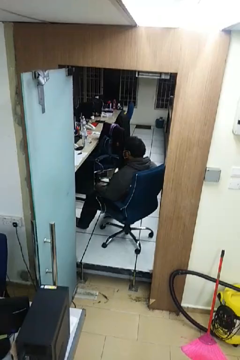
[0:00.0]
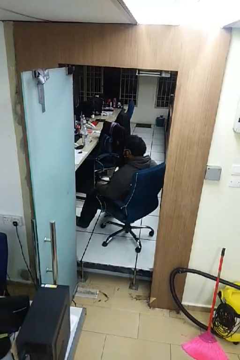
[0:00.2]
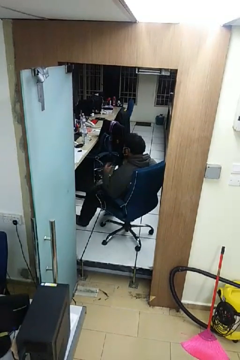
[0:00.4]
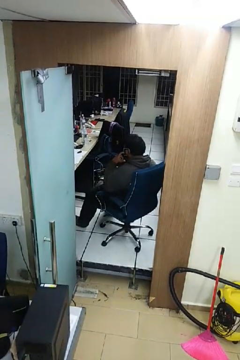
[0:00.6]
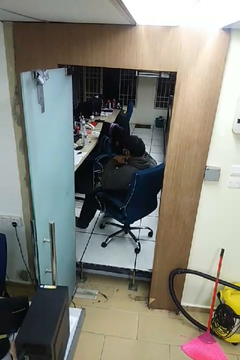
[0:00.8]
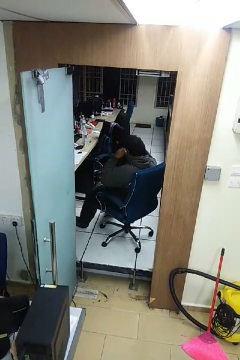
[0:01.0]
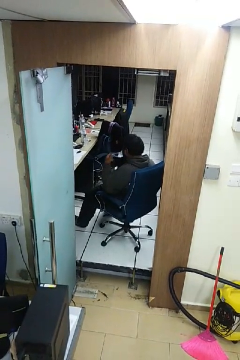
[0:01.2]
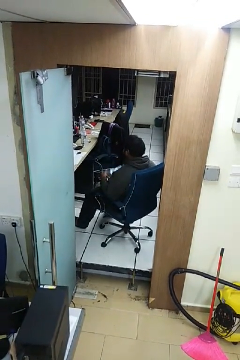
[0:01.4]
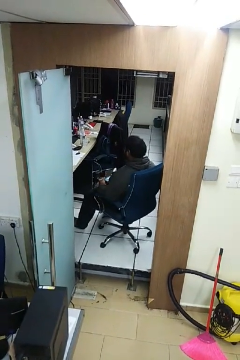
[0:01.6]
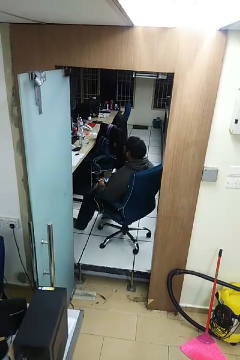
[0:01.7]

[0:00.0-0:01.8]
person takes off facemask

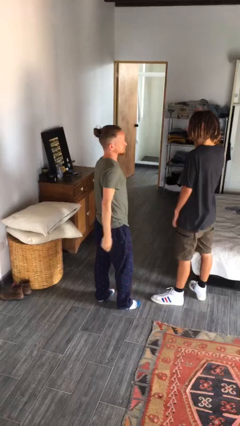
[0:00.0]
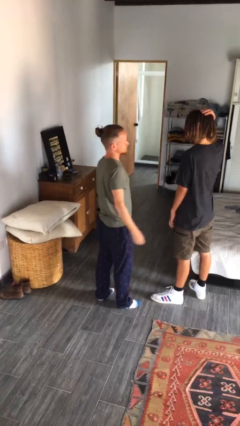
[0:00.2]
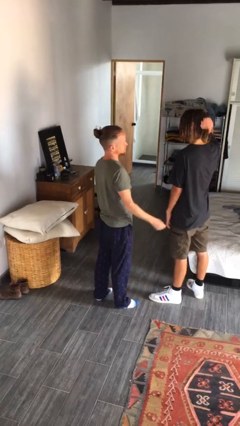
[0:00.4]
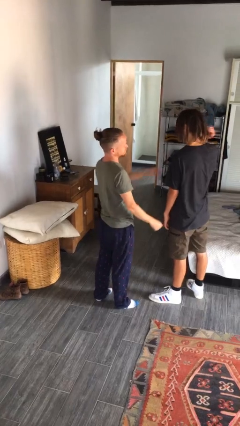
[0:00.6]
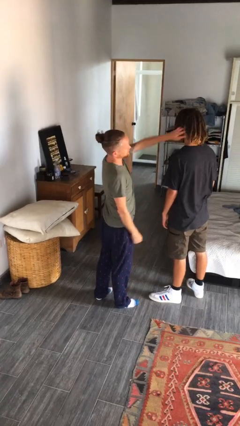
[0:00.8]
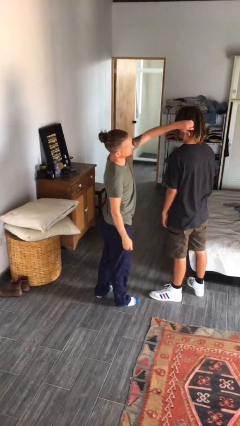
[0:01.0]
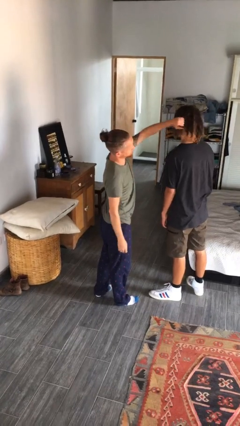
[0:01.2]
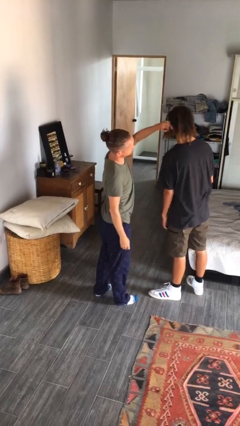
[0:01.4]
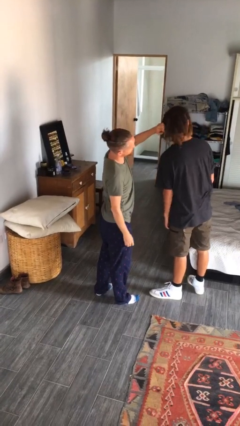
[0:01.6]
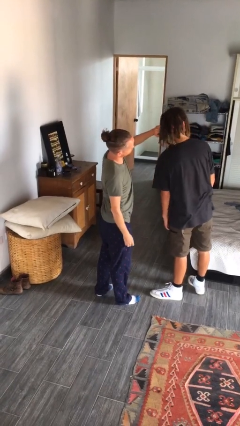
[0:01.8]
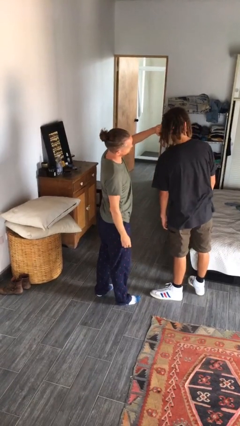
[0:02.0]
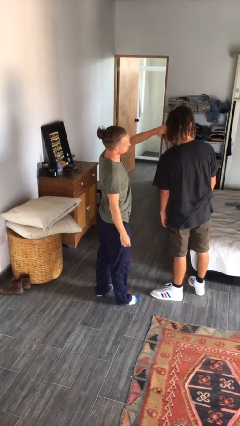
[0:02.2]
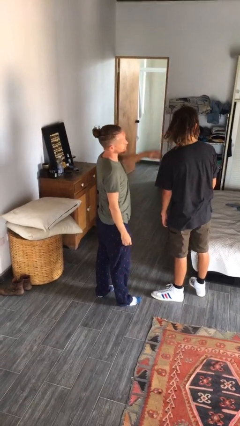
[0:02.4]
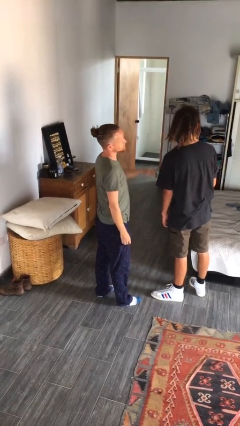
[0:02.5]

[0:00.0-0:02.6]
person grabs person by hair

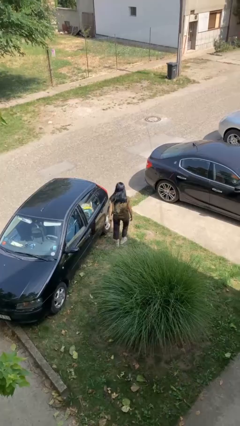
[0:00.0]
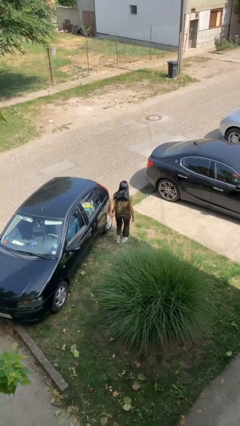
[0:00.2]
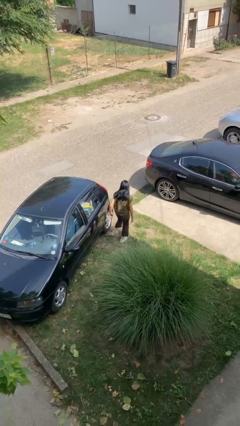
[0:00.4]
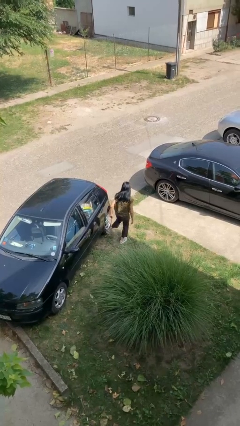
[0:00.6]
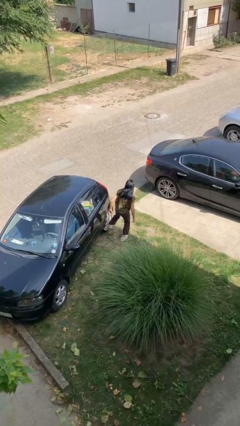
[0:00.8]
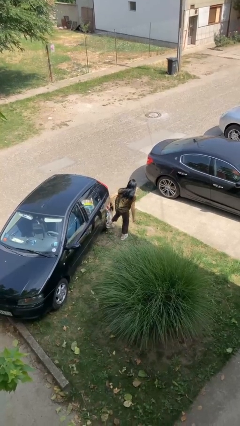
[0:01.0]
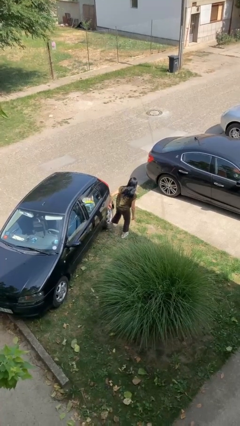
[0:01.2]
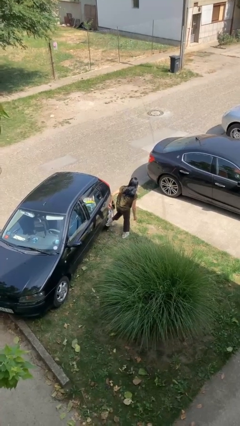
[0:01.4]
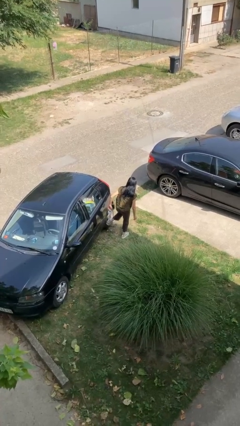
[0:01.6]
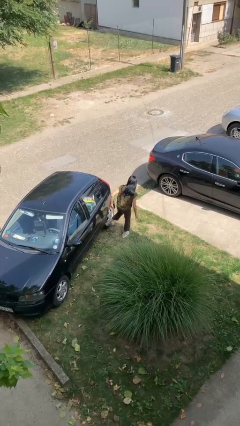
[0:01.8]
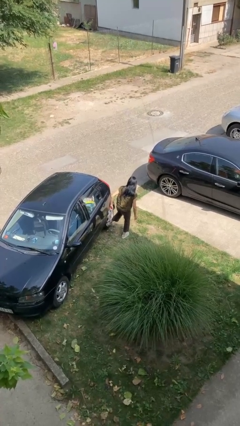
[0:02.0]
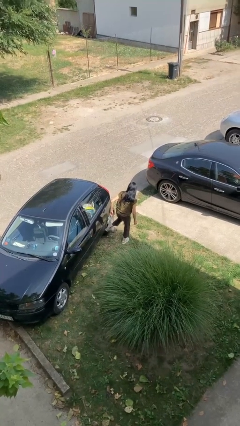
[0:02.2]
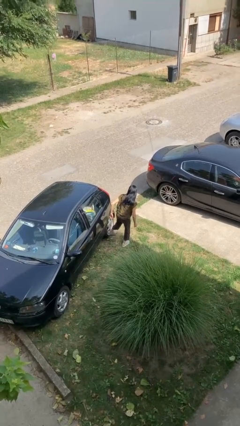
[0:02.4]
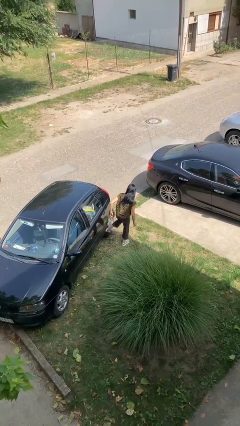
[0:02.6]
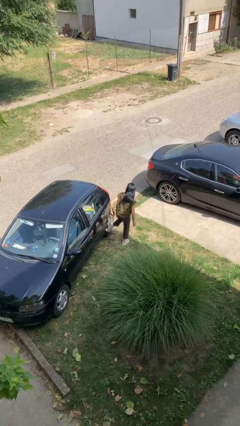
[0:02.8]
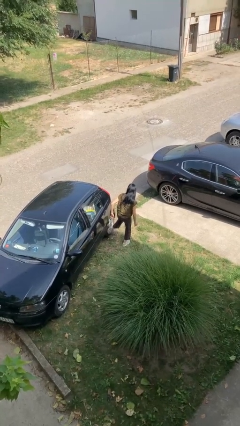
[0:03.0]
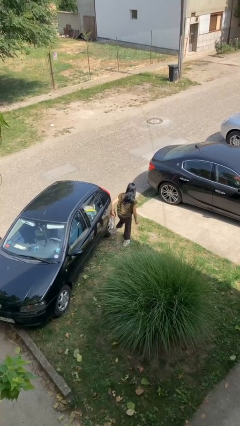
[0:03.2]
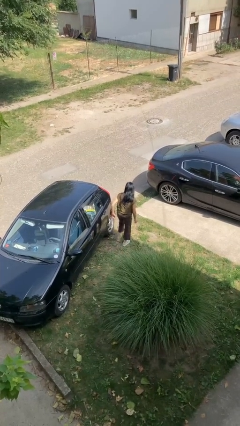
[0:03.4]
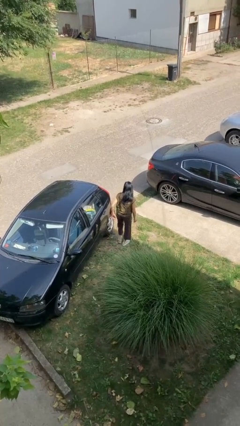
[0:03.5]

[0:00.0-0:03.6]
person kicks car tires

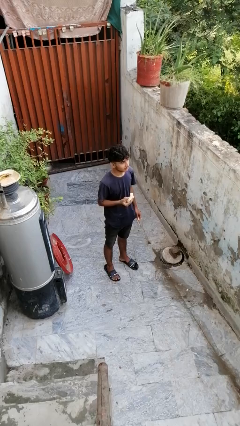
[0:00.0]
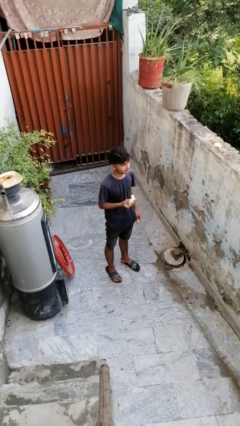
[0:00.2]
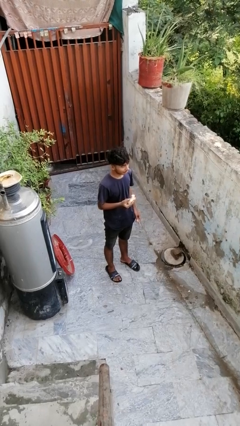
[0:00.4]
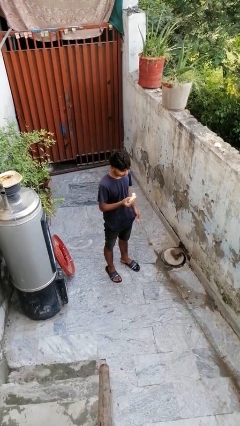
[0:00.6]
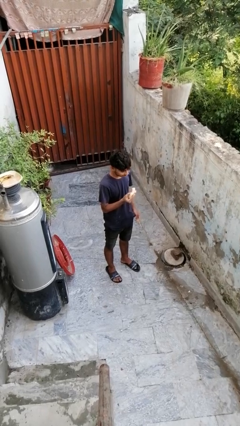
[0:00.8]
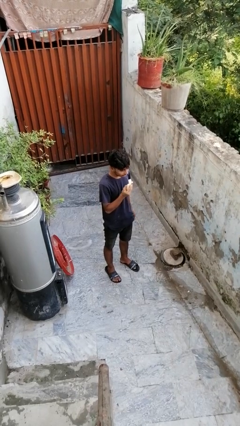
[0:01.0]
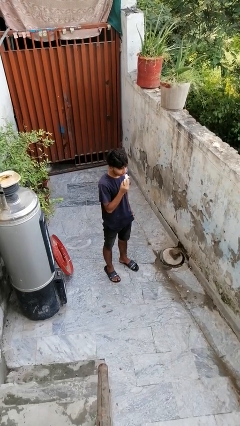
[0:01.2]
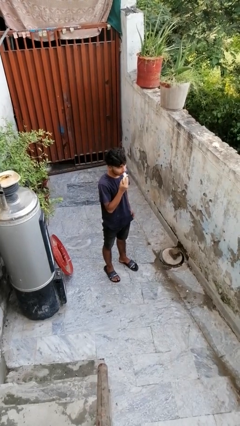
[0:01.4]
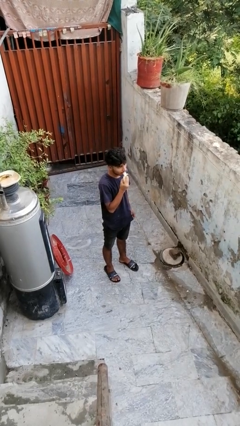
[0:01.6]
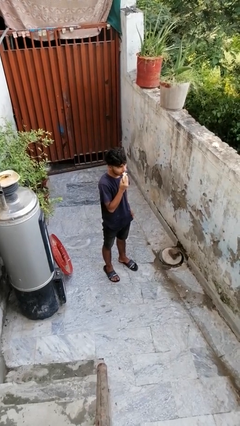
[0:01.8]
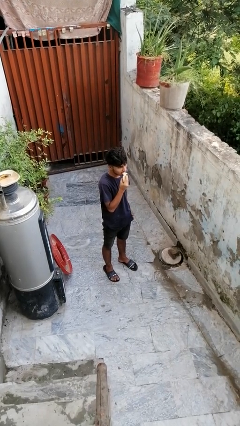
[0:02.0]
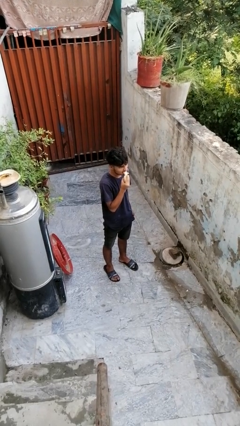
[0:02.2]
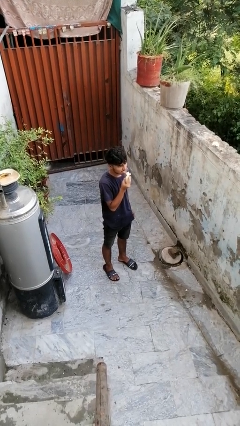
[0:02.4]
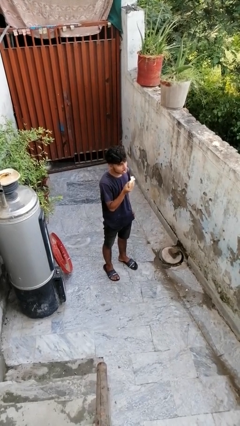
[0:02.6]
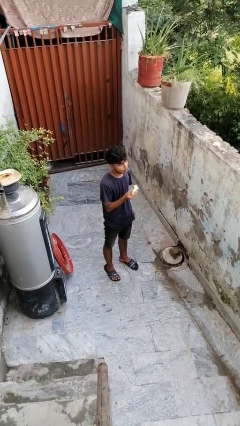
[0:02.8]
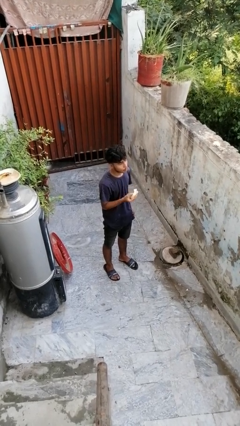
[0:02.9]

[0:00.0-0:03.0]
person eats banana

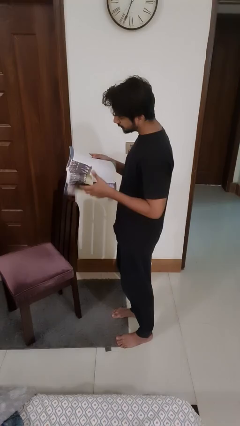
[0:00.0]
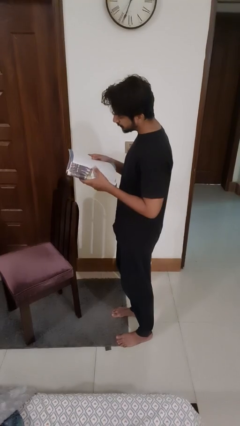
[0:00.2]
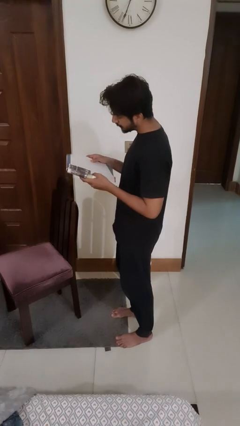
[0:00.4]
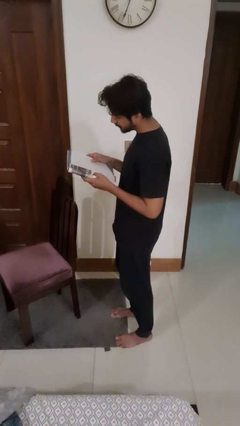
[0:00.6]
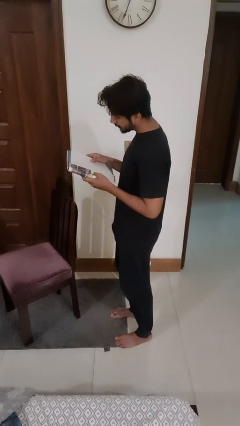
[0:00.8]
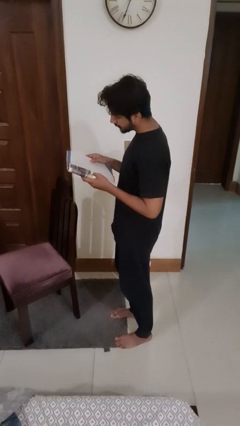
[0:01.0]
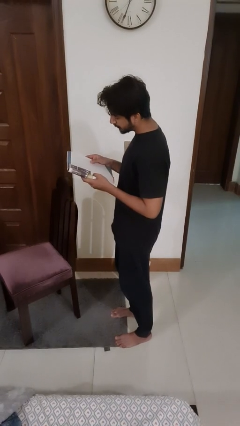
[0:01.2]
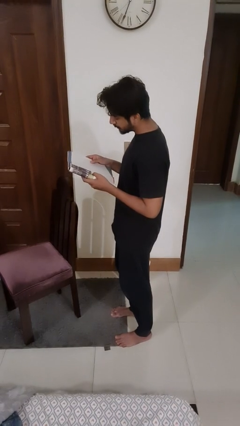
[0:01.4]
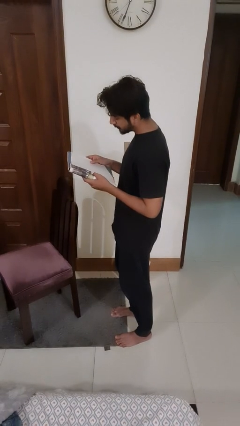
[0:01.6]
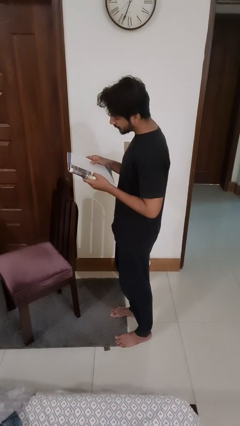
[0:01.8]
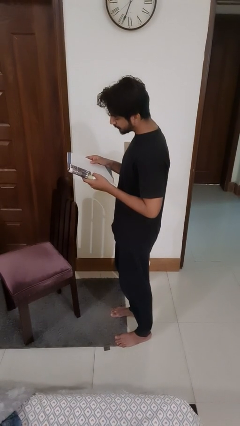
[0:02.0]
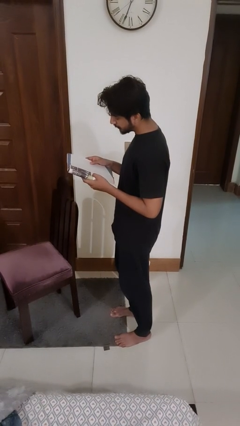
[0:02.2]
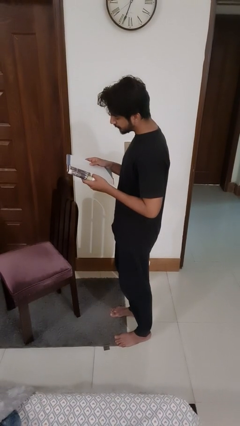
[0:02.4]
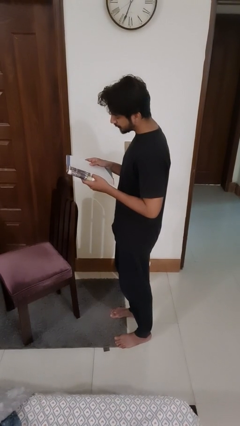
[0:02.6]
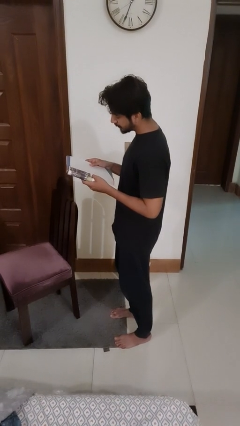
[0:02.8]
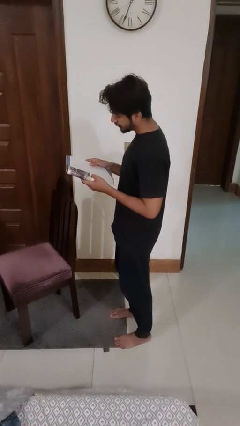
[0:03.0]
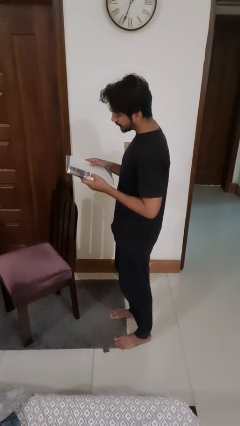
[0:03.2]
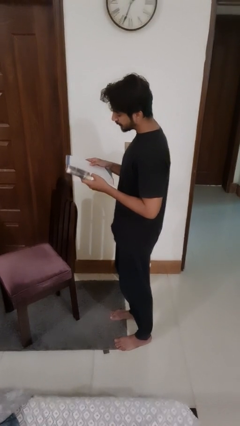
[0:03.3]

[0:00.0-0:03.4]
person reads magazine

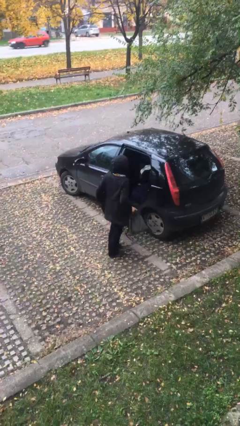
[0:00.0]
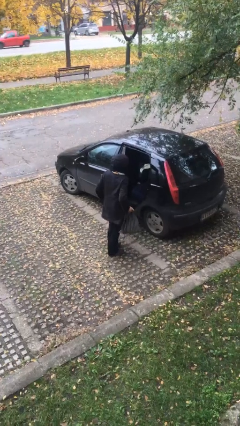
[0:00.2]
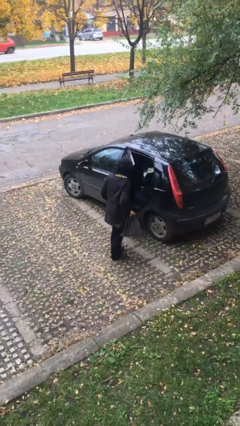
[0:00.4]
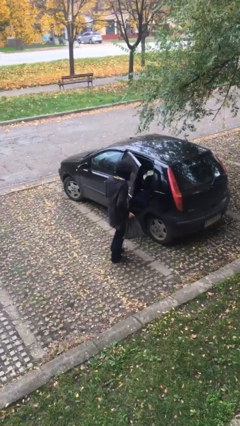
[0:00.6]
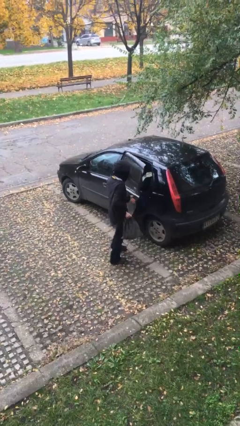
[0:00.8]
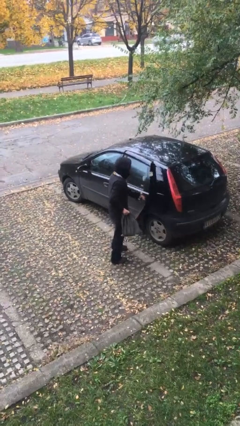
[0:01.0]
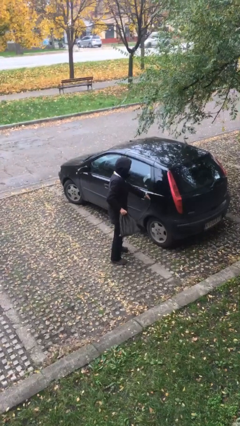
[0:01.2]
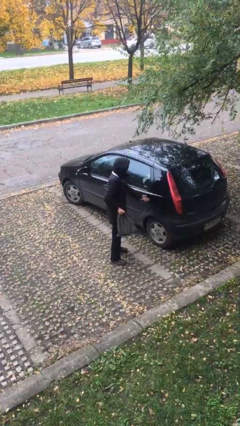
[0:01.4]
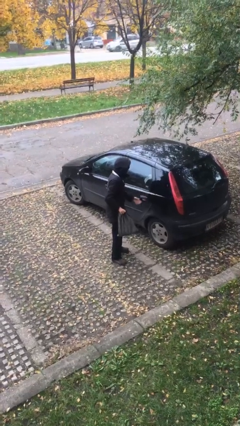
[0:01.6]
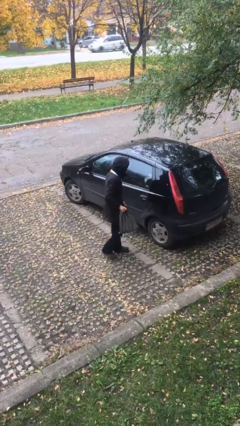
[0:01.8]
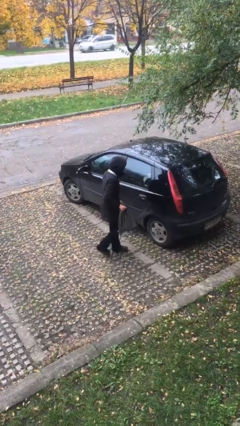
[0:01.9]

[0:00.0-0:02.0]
person closes car door

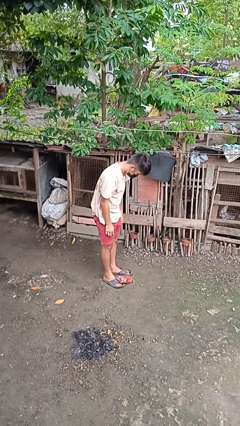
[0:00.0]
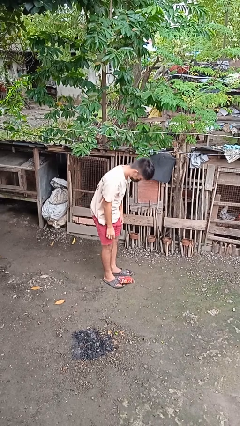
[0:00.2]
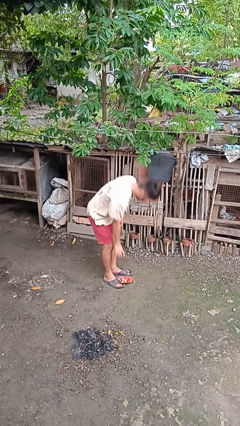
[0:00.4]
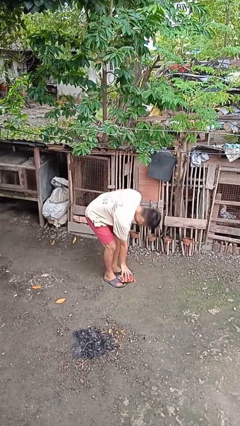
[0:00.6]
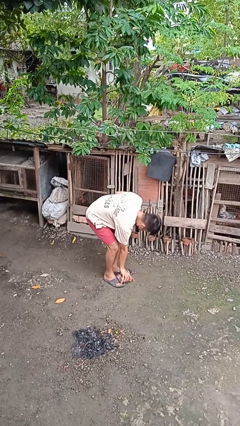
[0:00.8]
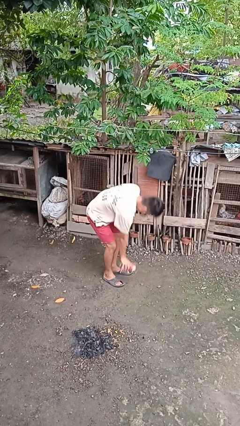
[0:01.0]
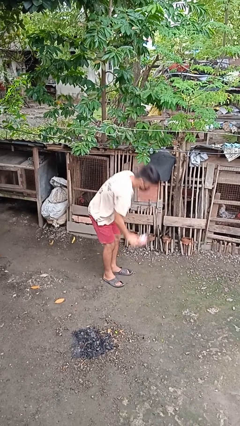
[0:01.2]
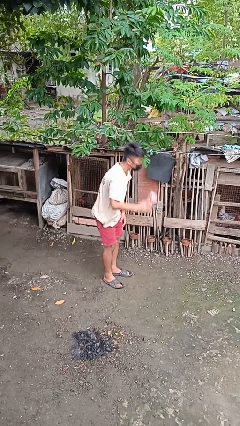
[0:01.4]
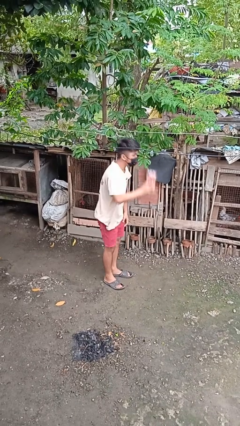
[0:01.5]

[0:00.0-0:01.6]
person picks up object from floor
